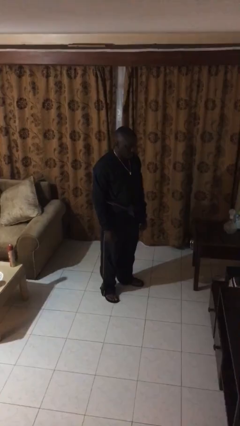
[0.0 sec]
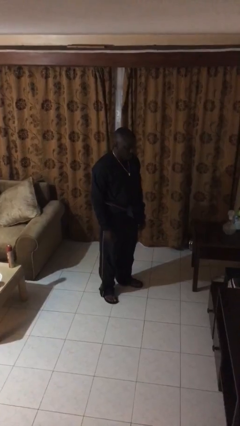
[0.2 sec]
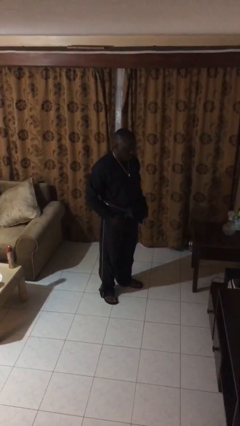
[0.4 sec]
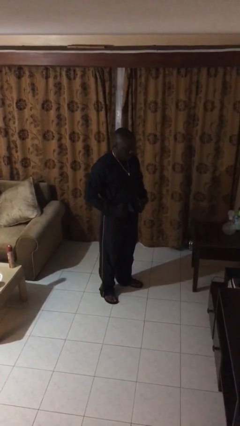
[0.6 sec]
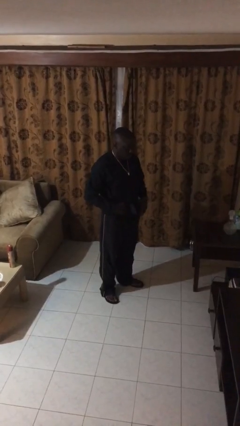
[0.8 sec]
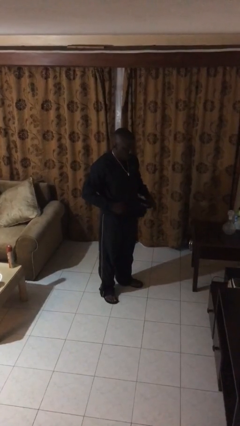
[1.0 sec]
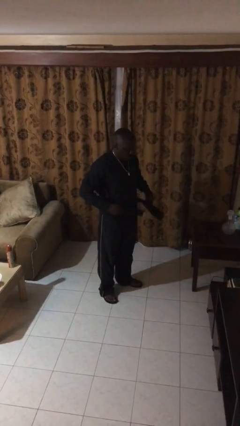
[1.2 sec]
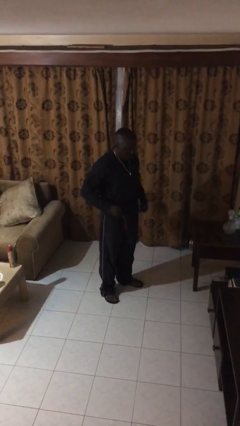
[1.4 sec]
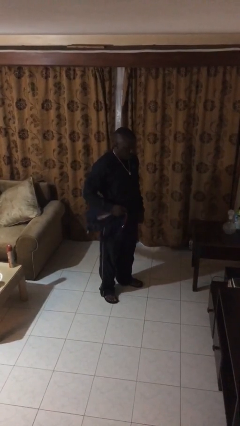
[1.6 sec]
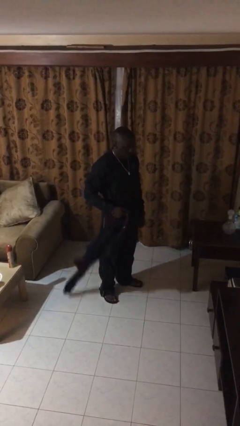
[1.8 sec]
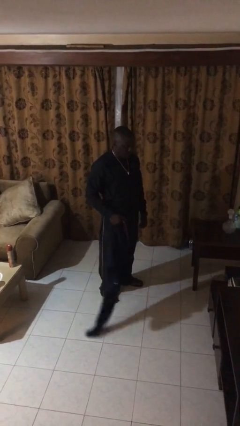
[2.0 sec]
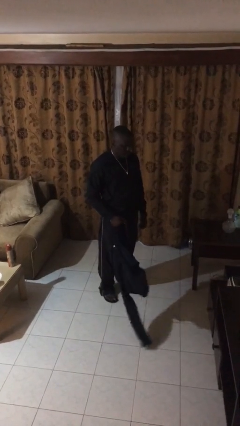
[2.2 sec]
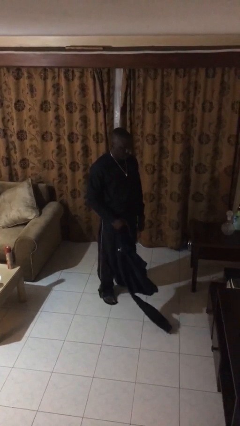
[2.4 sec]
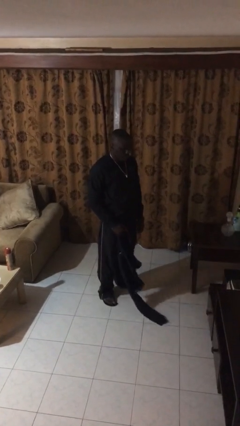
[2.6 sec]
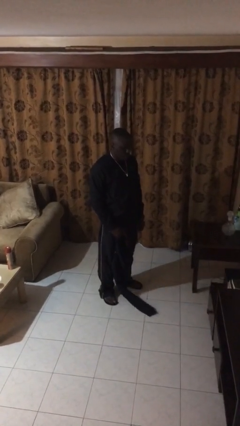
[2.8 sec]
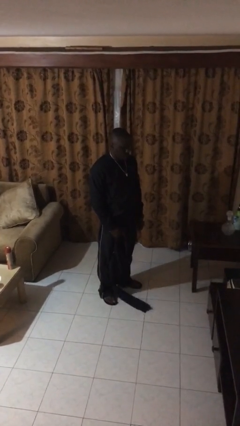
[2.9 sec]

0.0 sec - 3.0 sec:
person unties jacket around waist

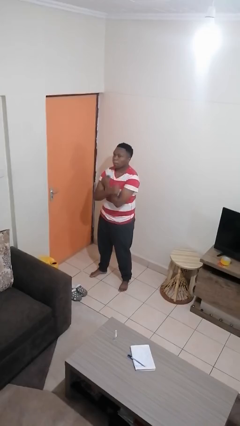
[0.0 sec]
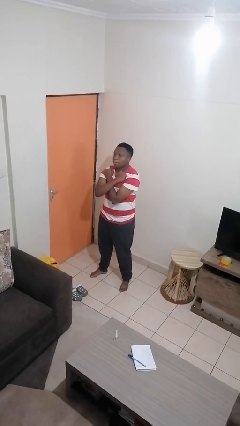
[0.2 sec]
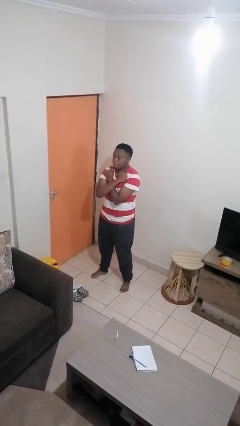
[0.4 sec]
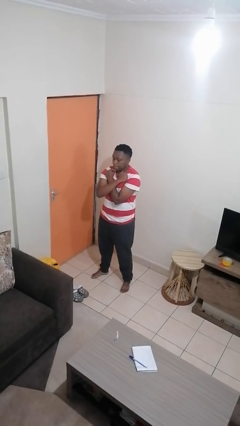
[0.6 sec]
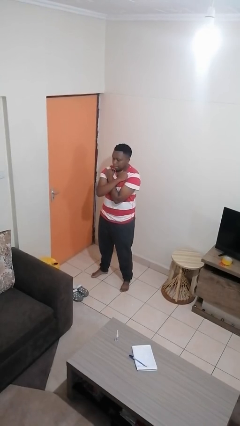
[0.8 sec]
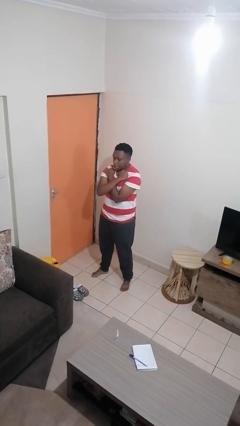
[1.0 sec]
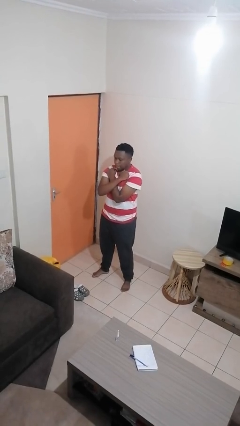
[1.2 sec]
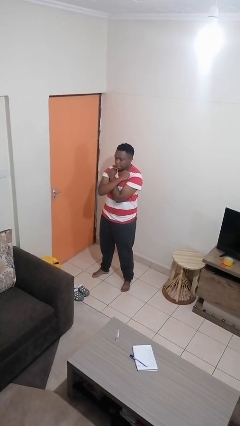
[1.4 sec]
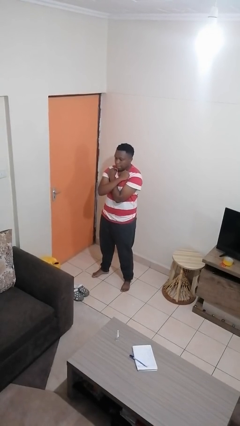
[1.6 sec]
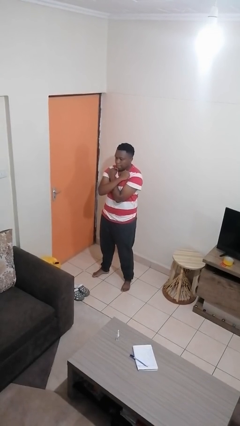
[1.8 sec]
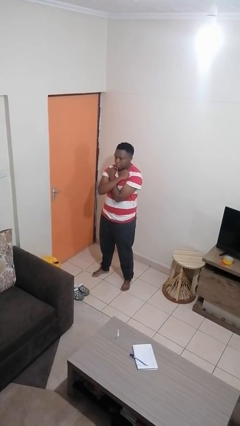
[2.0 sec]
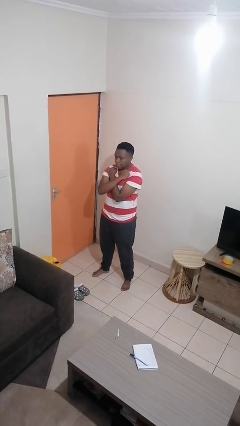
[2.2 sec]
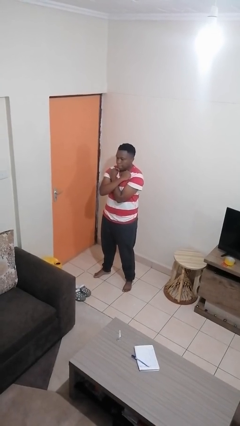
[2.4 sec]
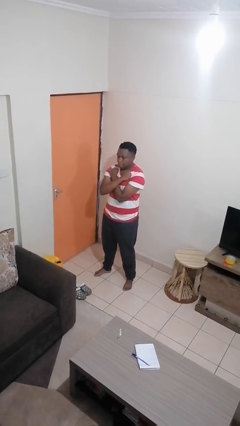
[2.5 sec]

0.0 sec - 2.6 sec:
person gestures arms x

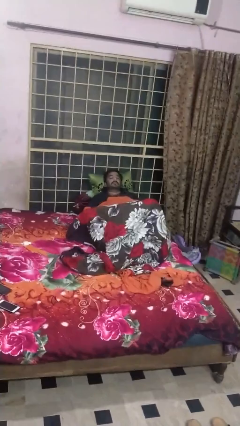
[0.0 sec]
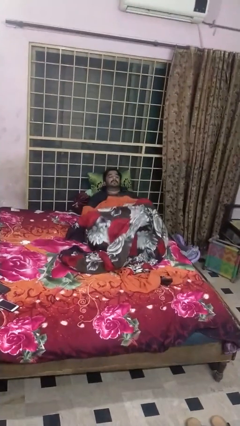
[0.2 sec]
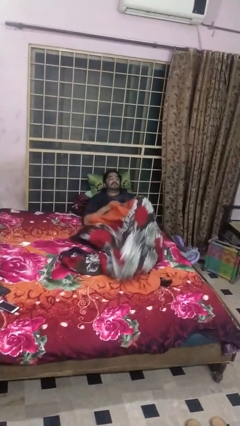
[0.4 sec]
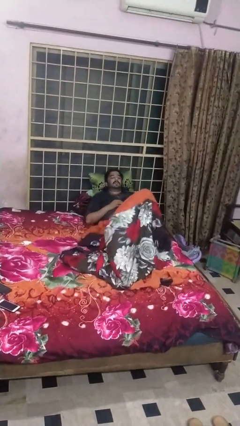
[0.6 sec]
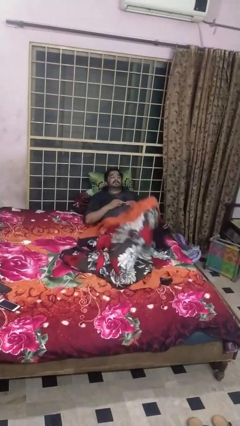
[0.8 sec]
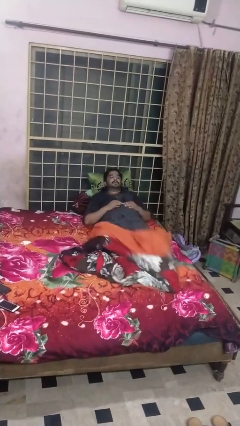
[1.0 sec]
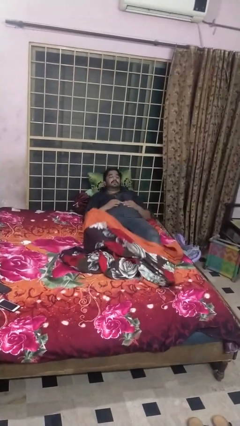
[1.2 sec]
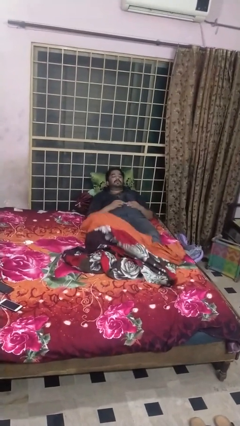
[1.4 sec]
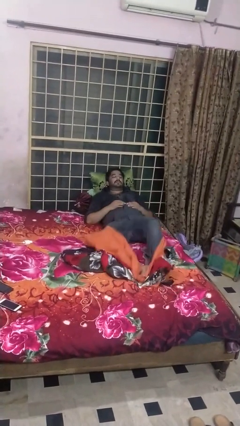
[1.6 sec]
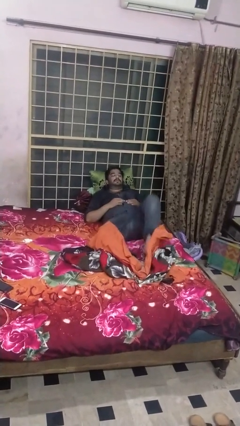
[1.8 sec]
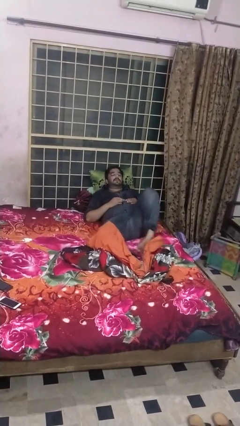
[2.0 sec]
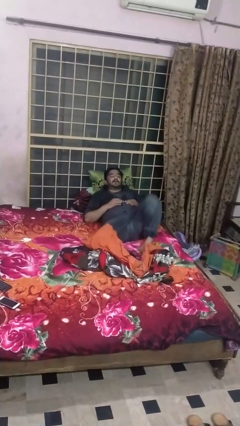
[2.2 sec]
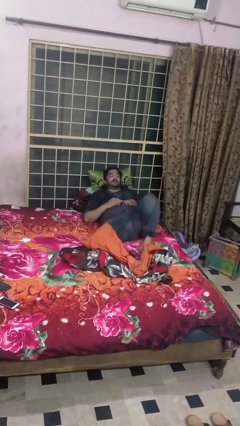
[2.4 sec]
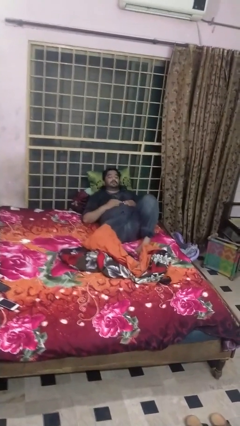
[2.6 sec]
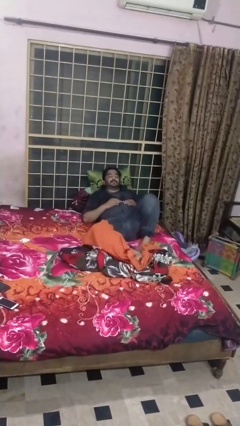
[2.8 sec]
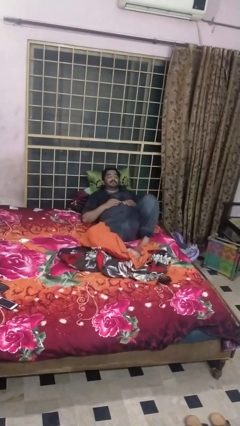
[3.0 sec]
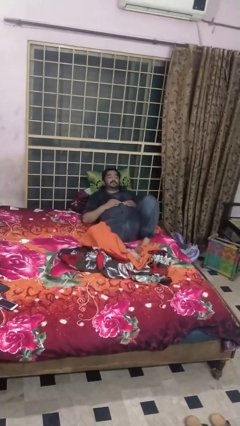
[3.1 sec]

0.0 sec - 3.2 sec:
person uncovers with bedsheets

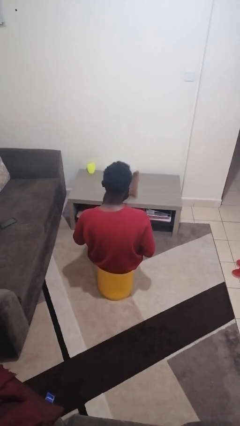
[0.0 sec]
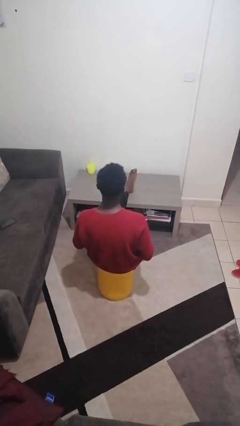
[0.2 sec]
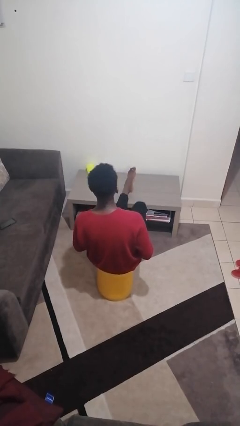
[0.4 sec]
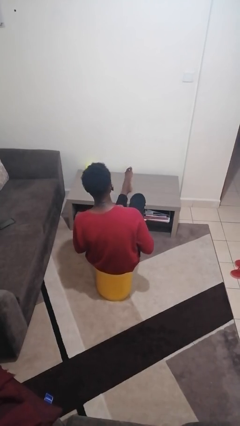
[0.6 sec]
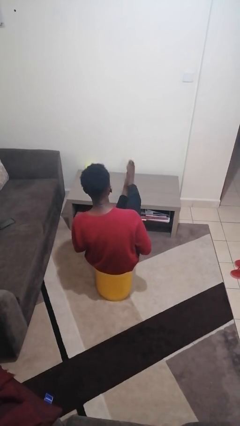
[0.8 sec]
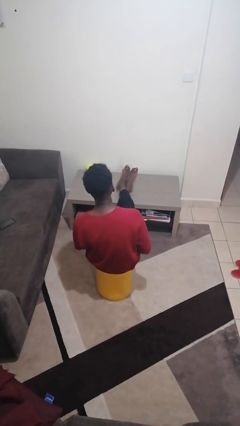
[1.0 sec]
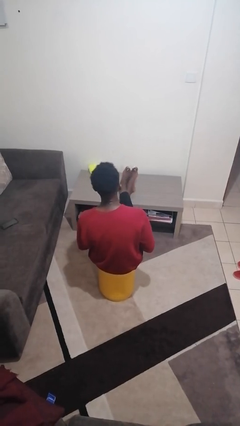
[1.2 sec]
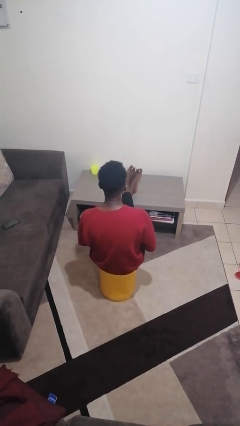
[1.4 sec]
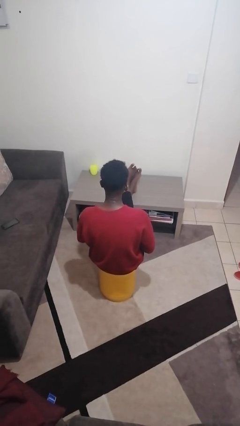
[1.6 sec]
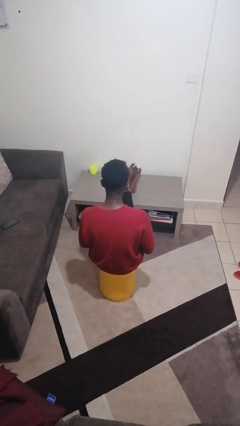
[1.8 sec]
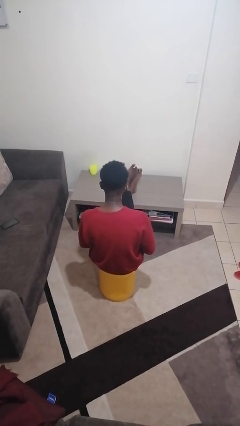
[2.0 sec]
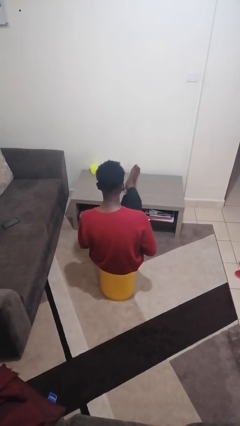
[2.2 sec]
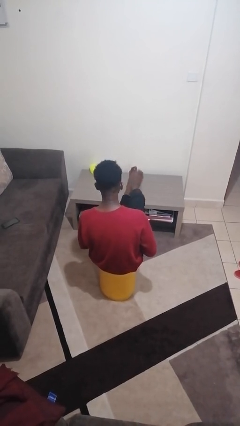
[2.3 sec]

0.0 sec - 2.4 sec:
person puts feet up

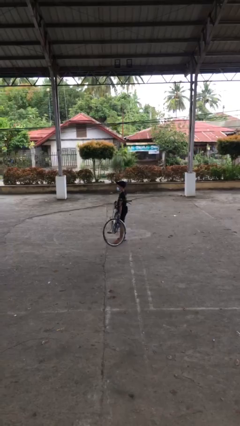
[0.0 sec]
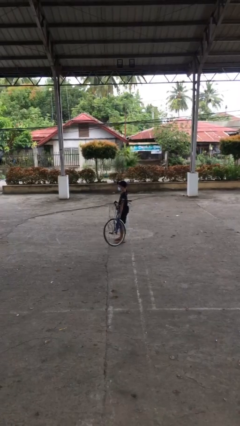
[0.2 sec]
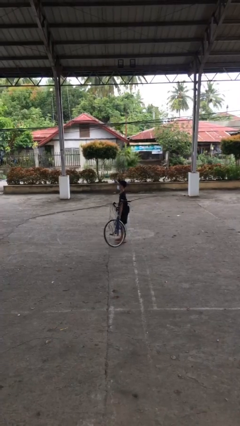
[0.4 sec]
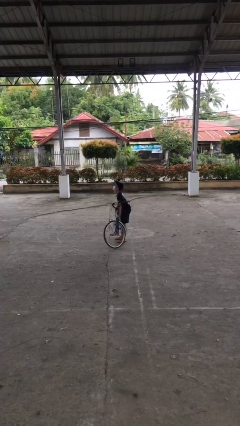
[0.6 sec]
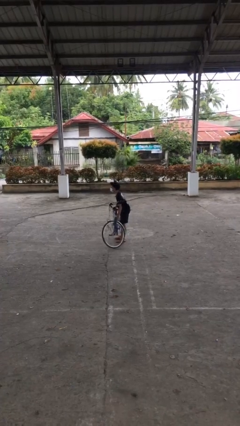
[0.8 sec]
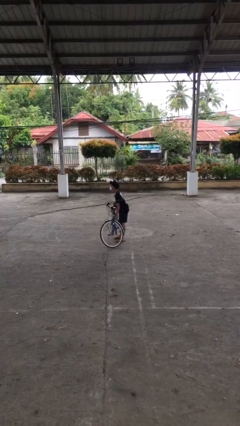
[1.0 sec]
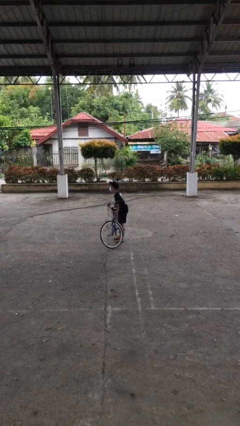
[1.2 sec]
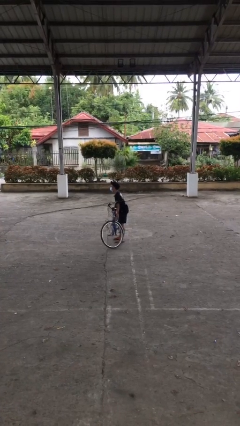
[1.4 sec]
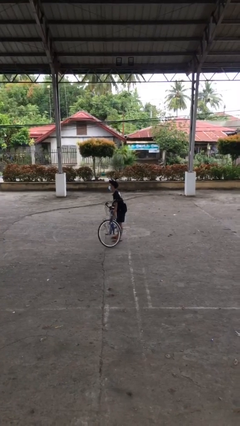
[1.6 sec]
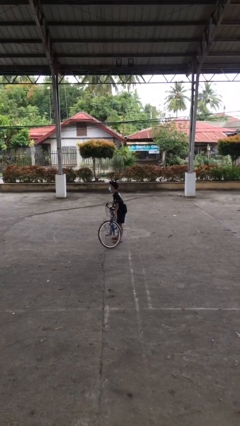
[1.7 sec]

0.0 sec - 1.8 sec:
person puts down object on floor

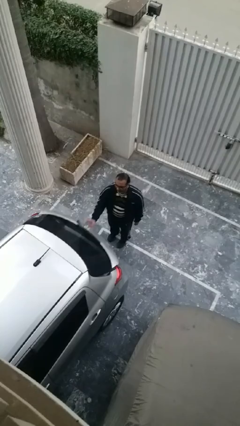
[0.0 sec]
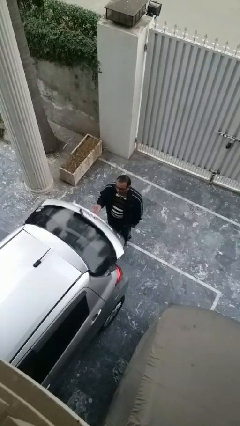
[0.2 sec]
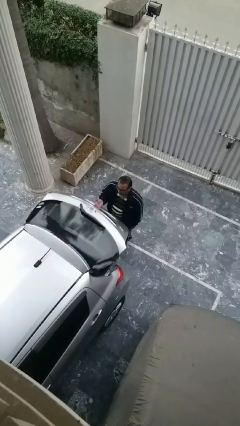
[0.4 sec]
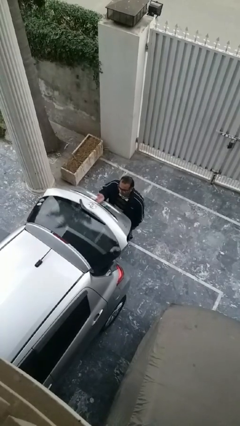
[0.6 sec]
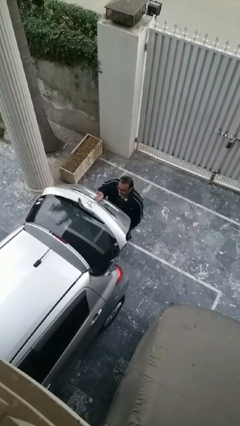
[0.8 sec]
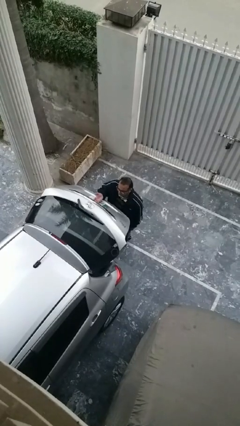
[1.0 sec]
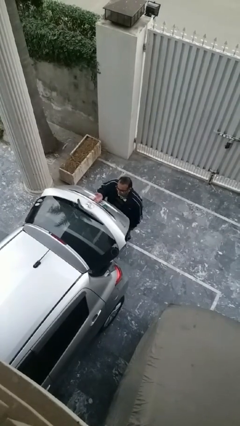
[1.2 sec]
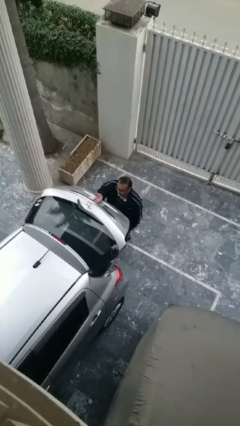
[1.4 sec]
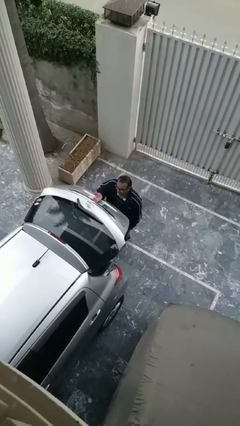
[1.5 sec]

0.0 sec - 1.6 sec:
person opens car trunk

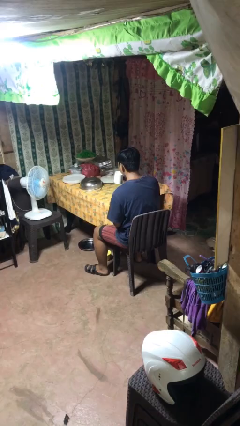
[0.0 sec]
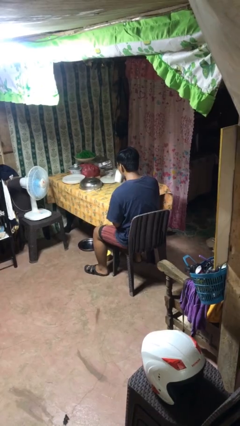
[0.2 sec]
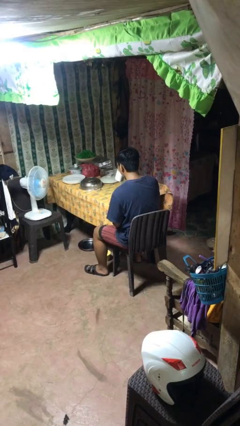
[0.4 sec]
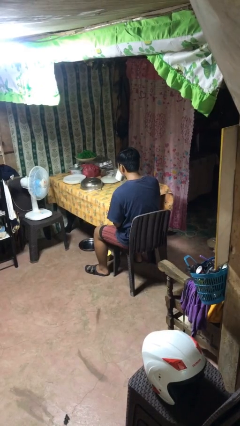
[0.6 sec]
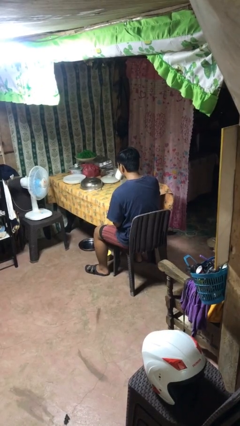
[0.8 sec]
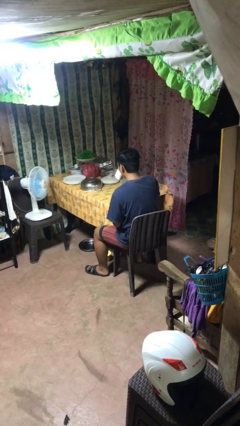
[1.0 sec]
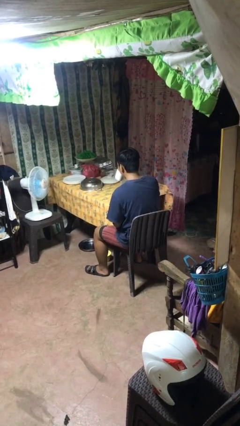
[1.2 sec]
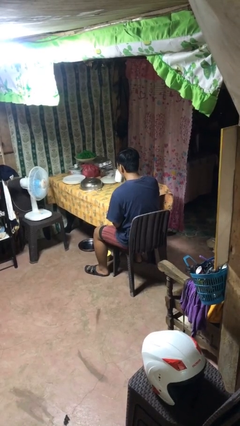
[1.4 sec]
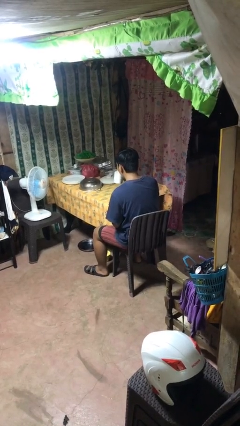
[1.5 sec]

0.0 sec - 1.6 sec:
person drinks from mug

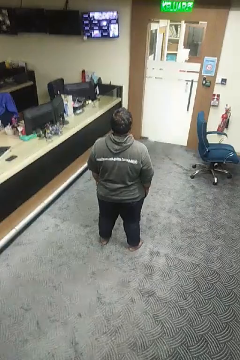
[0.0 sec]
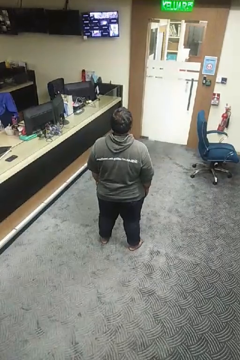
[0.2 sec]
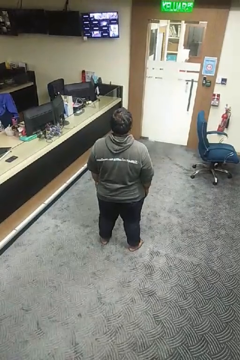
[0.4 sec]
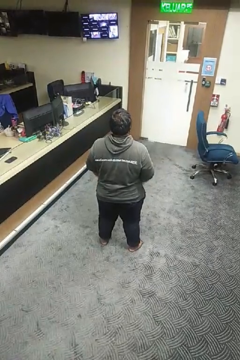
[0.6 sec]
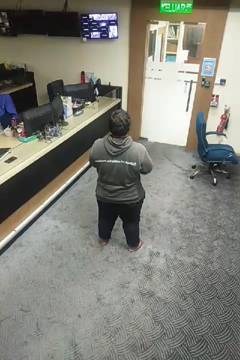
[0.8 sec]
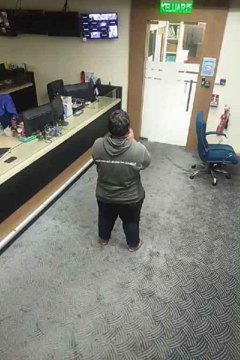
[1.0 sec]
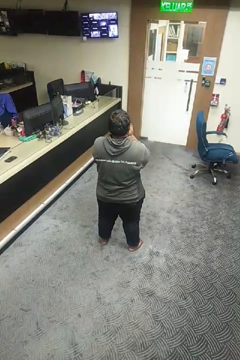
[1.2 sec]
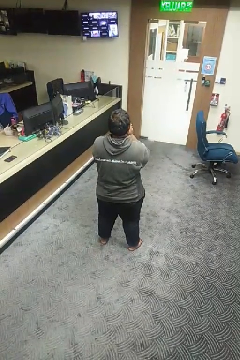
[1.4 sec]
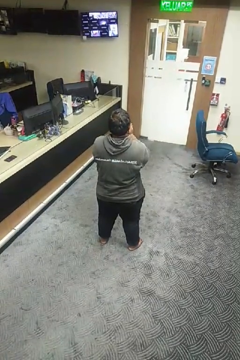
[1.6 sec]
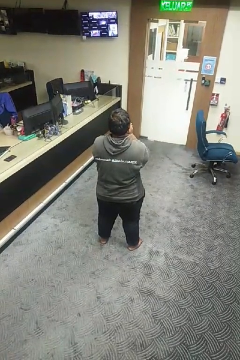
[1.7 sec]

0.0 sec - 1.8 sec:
person prays
